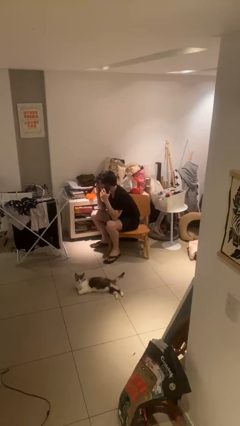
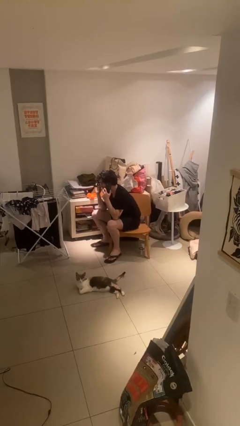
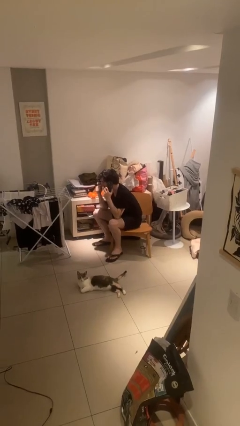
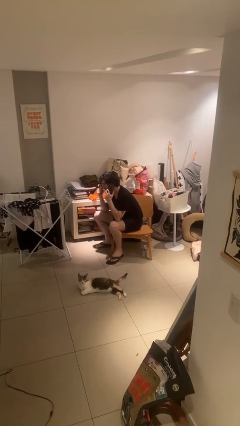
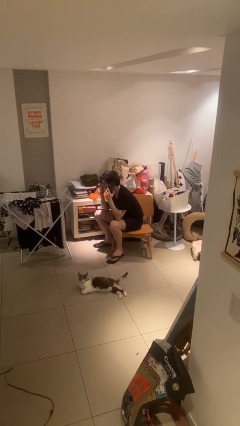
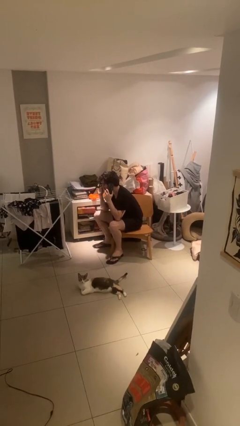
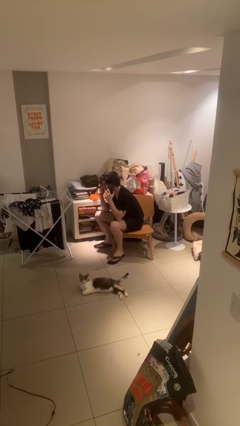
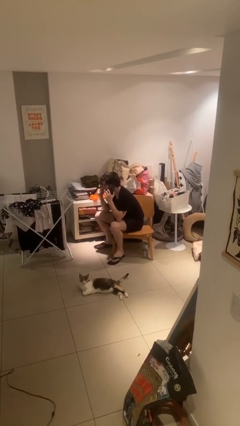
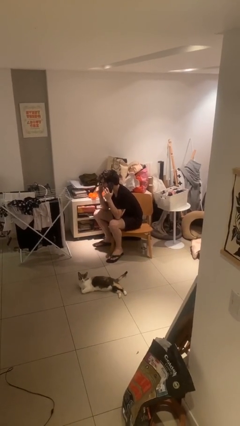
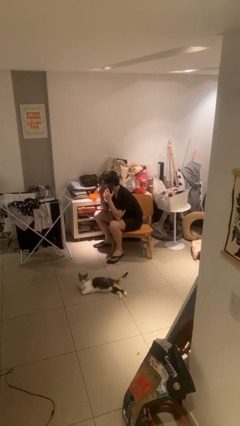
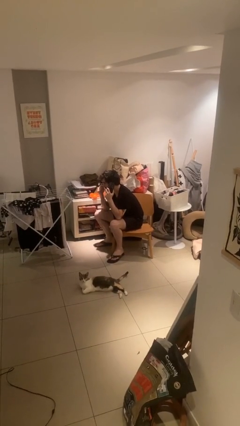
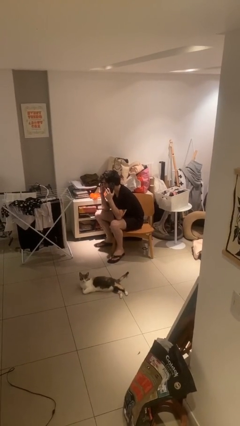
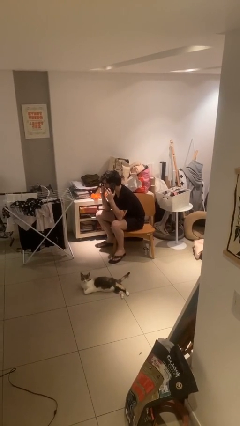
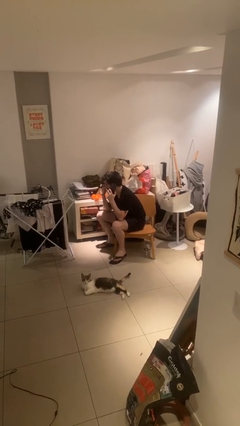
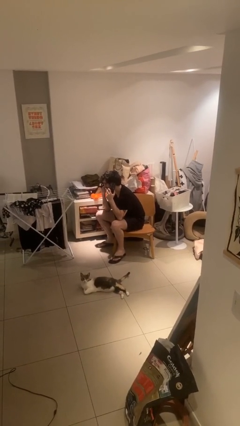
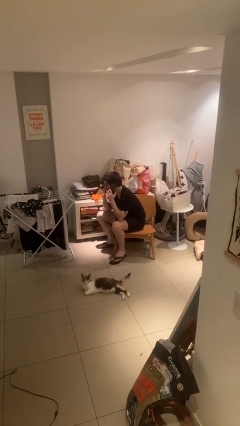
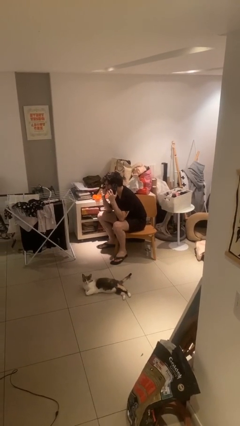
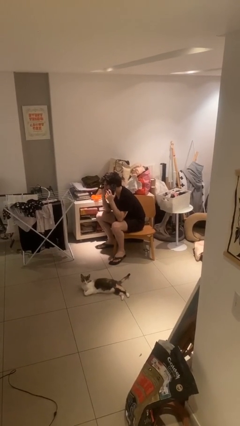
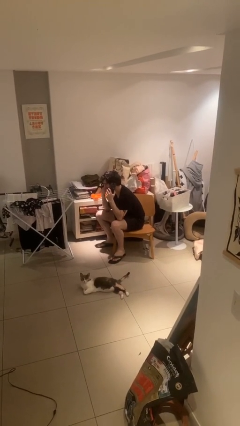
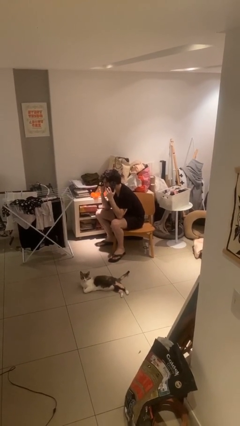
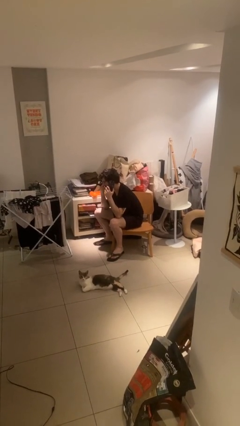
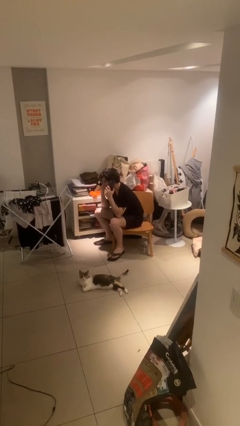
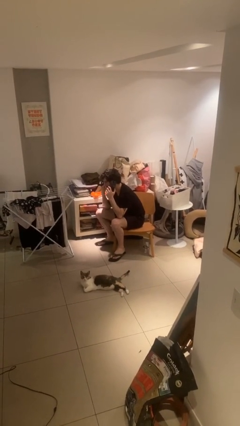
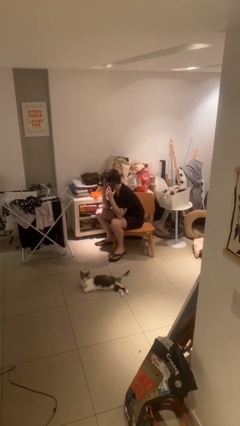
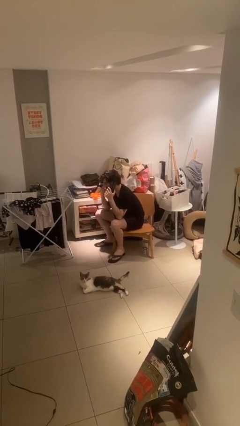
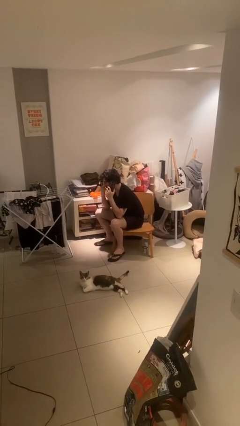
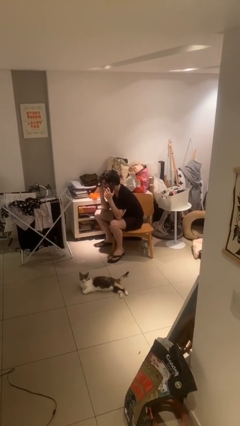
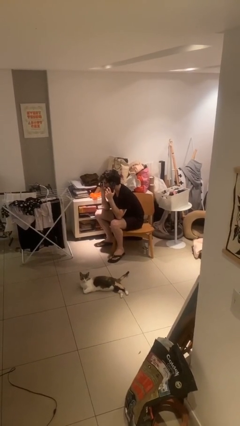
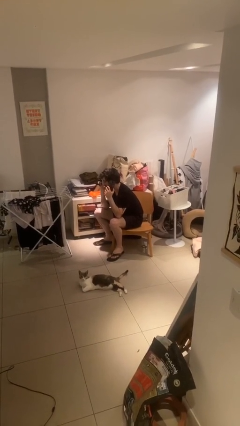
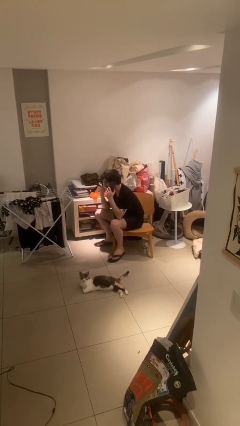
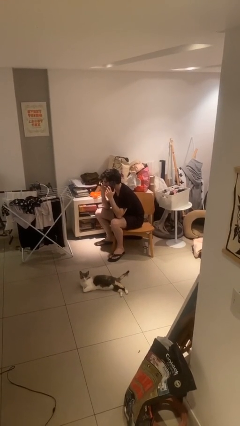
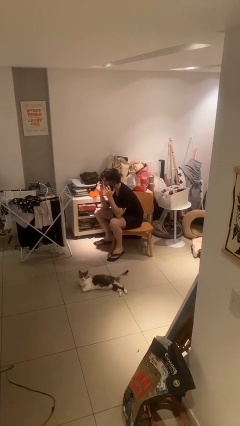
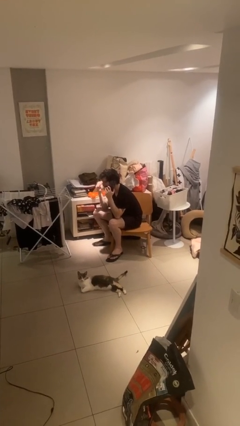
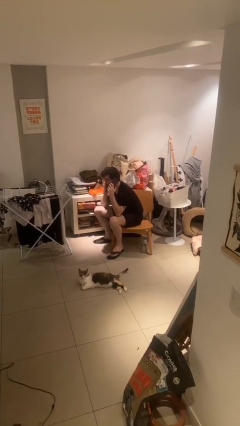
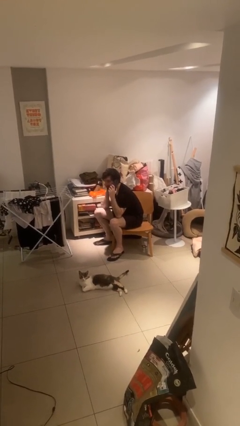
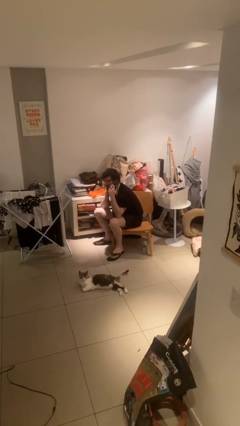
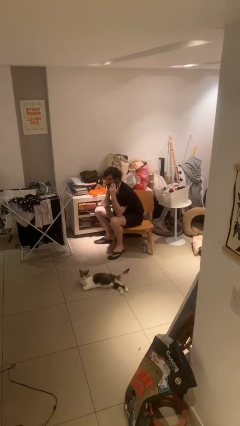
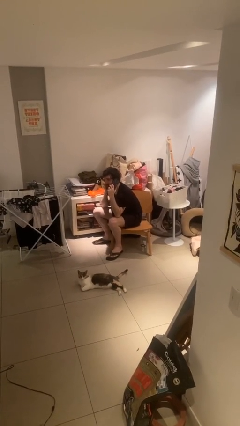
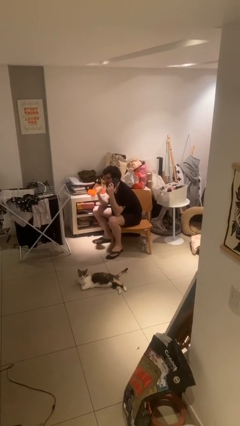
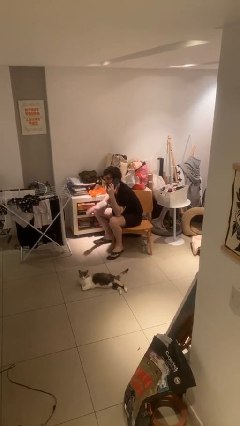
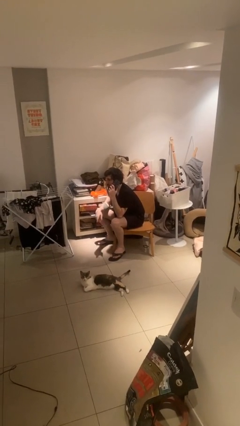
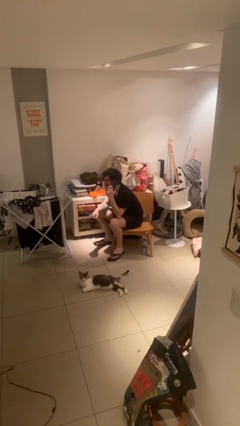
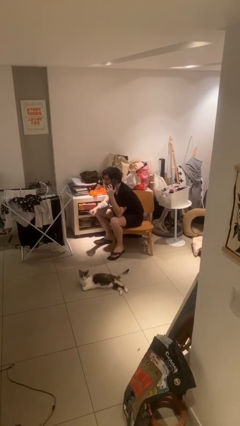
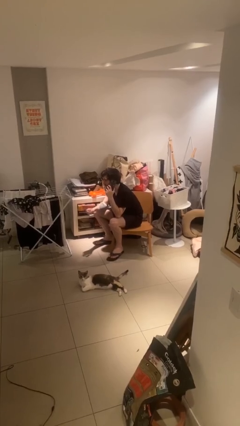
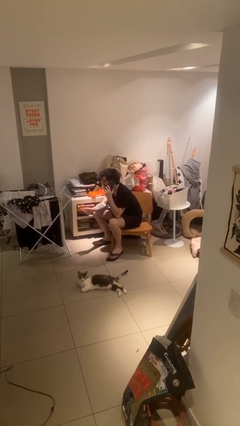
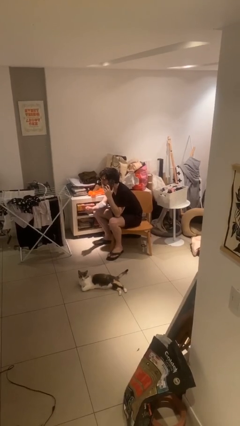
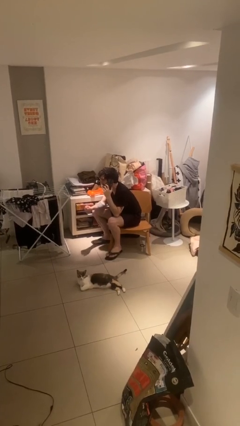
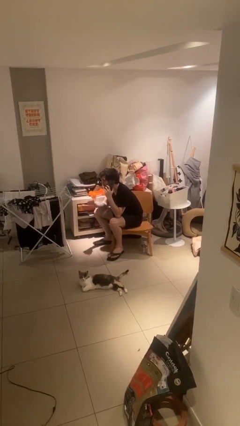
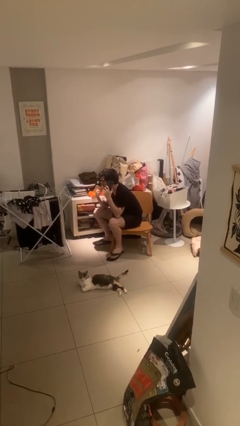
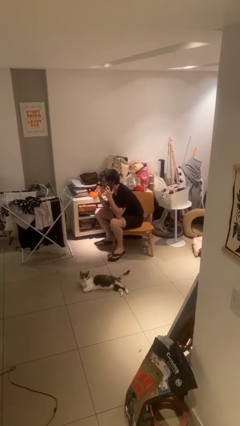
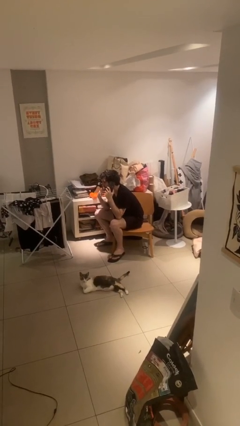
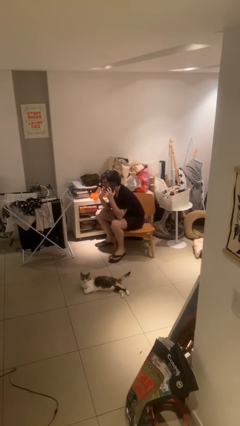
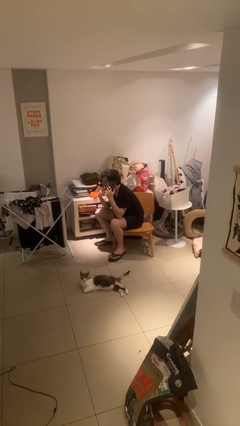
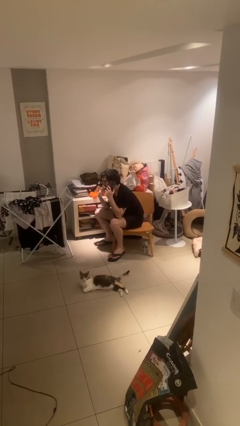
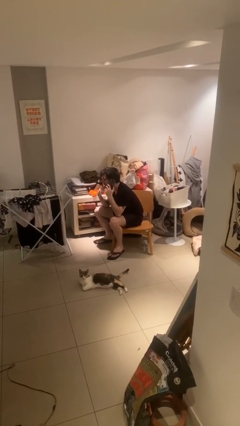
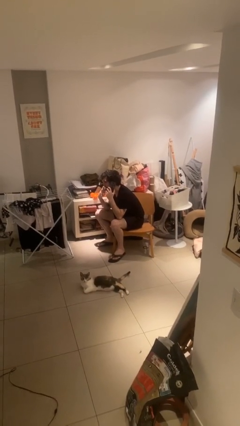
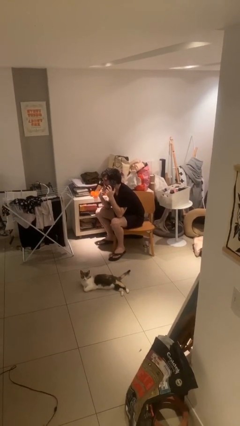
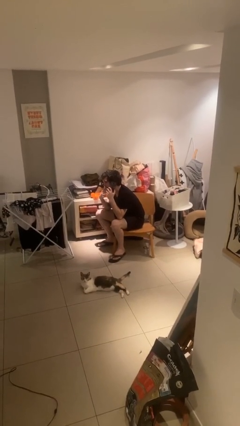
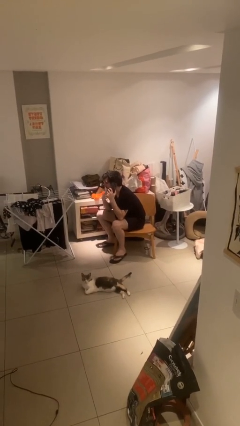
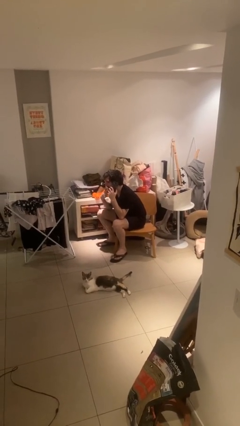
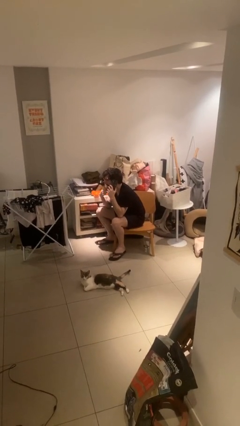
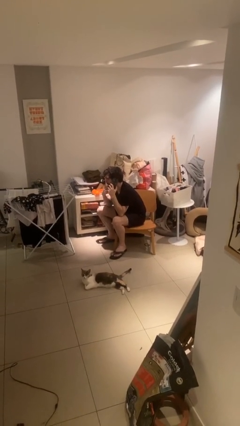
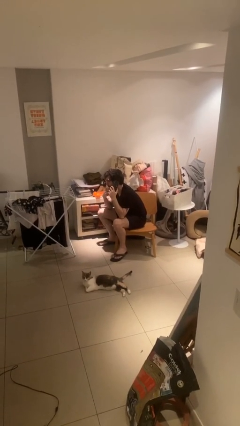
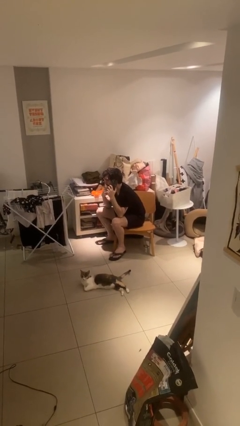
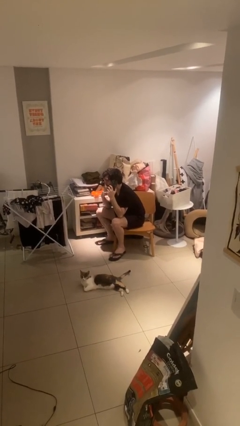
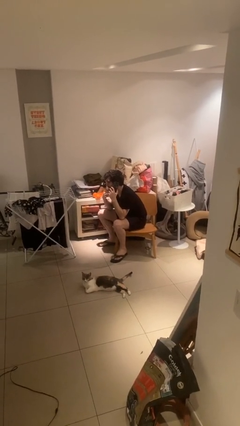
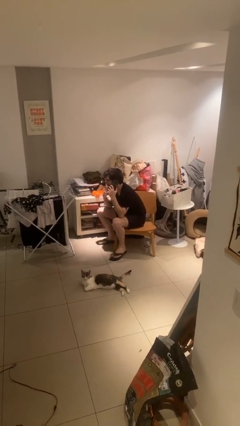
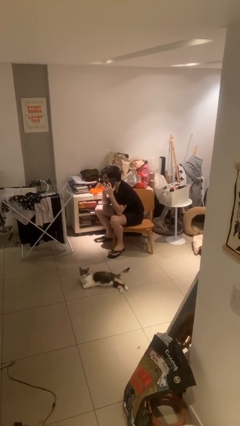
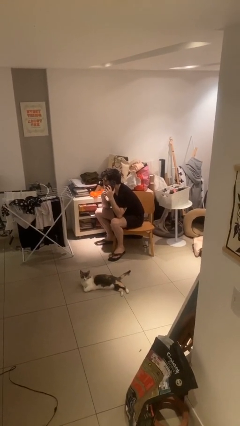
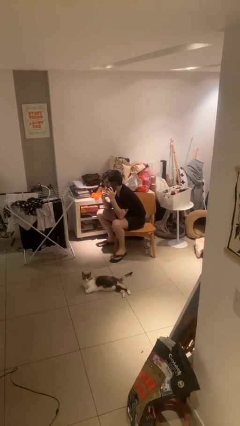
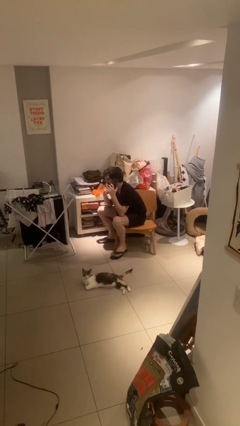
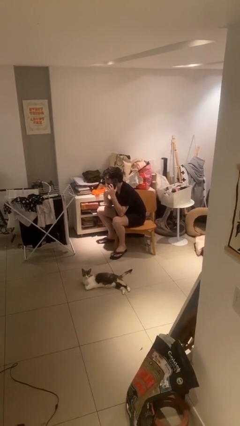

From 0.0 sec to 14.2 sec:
person talks on phone

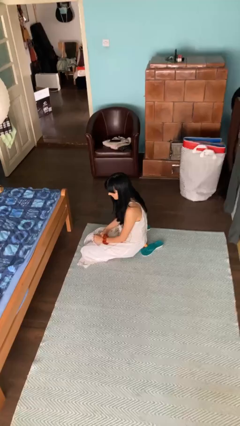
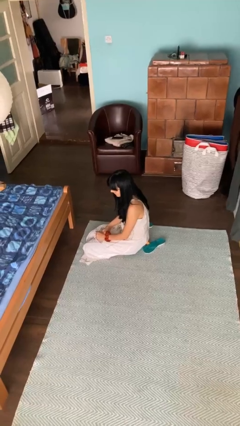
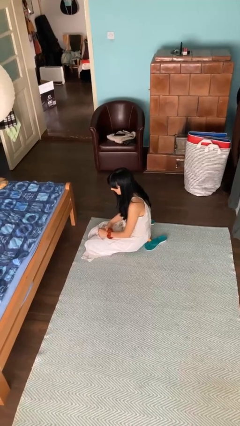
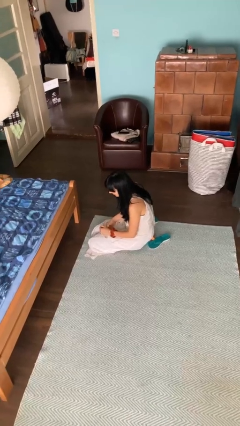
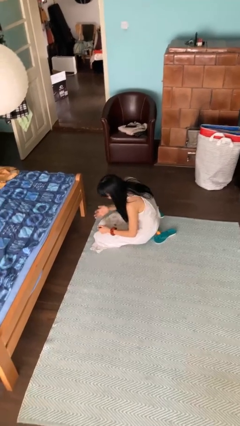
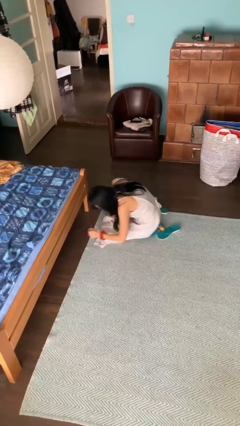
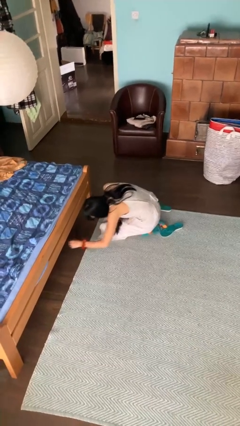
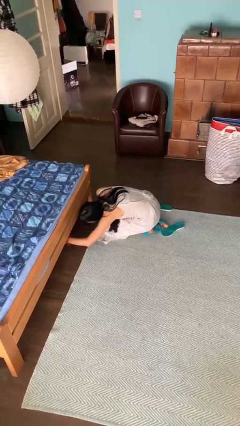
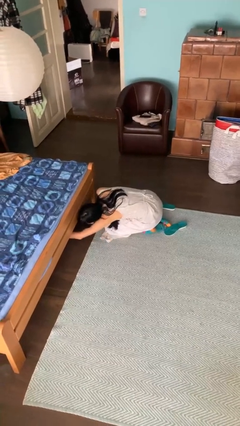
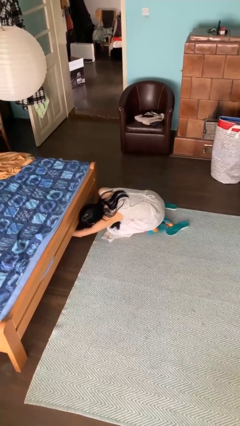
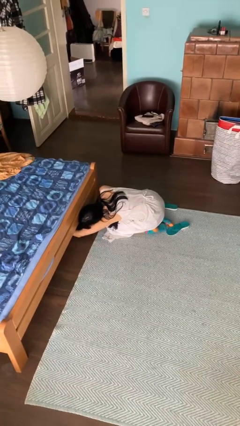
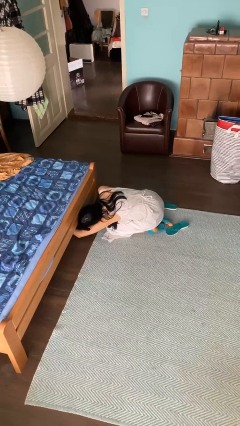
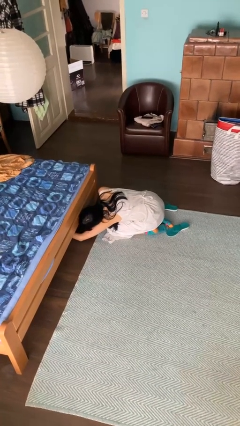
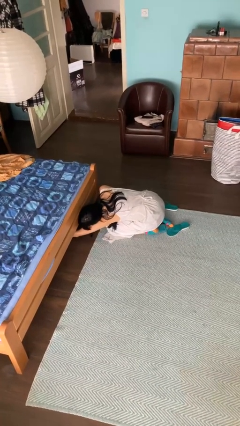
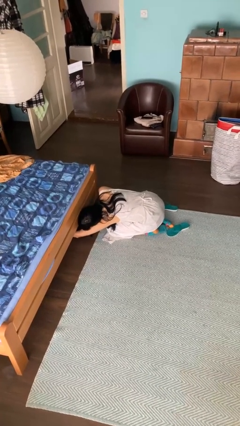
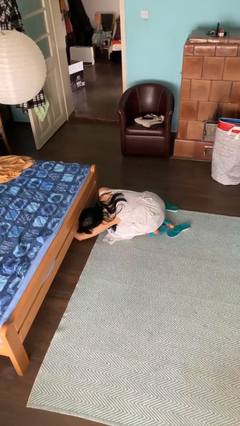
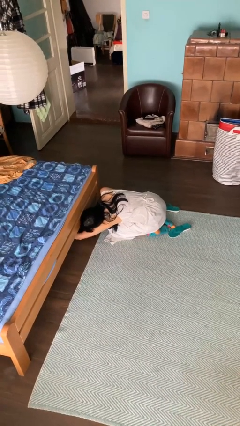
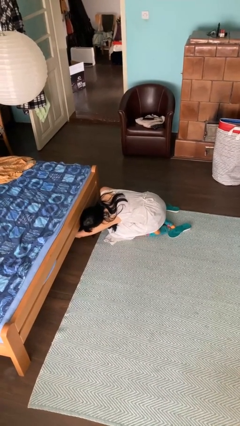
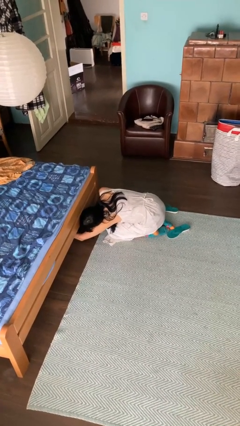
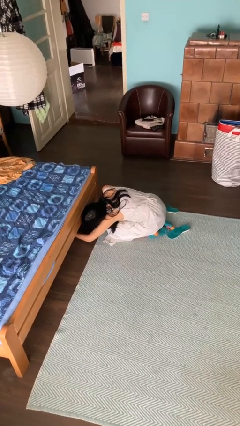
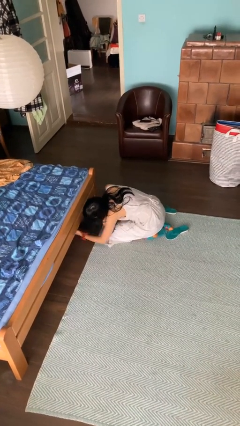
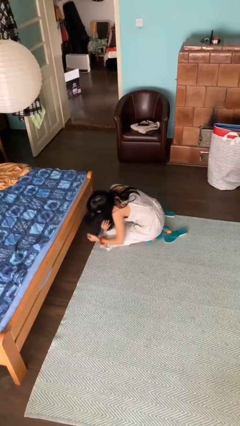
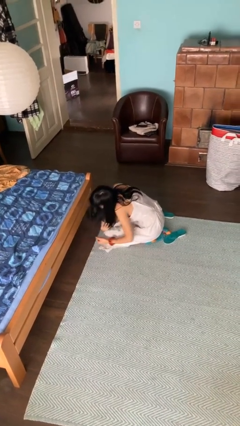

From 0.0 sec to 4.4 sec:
person searches under bed
